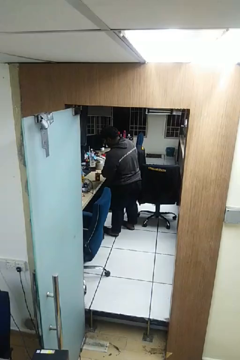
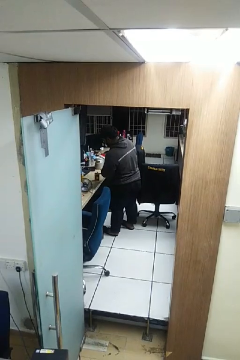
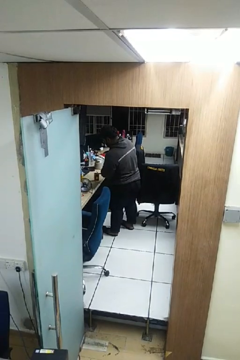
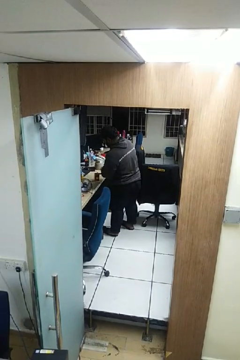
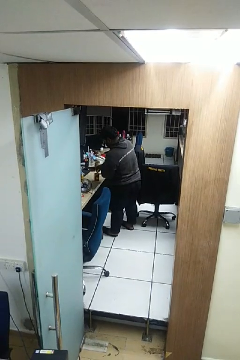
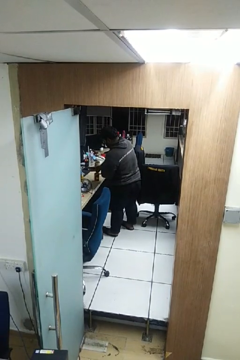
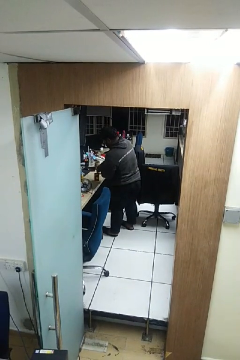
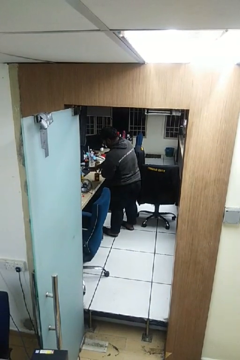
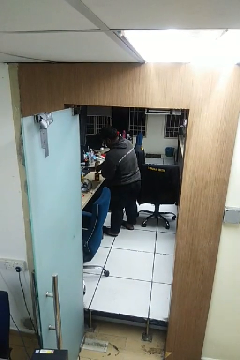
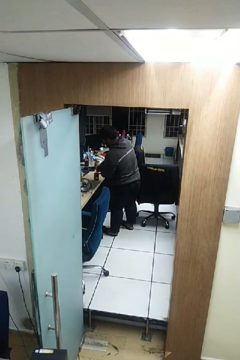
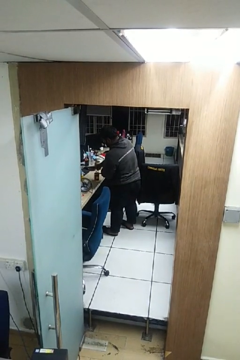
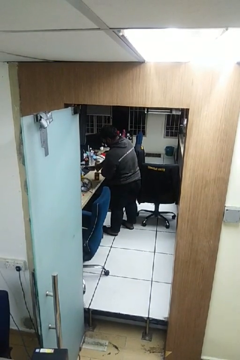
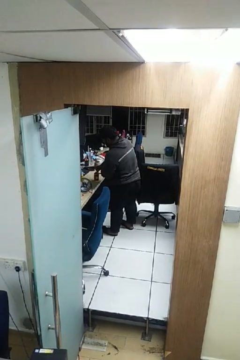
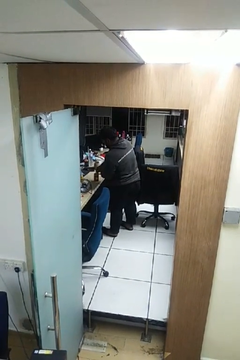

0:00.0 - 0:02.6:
person opens can with can opener

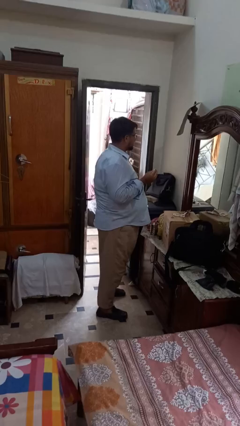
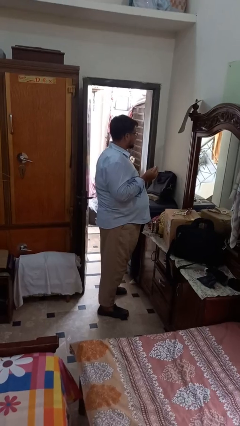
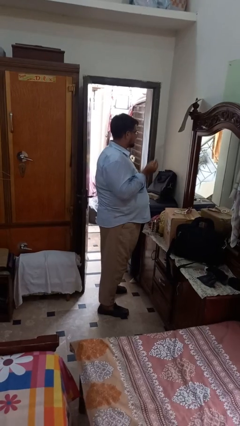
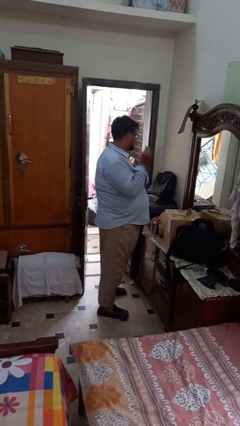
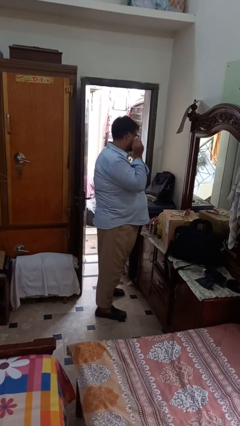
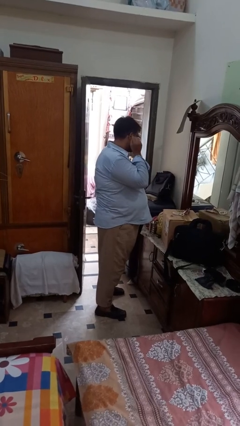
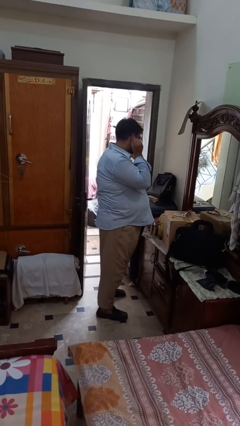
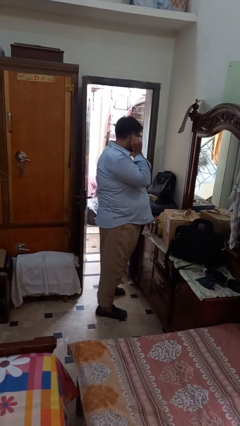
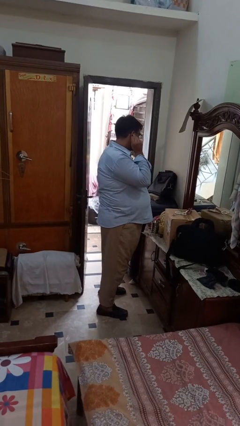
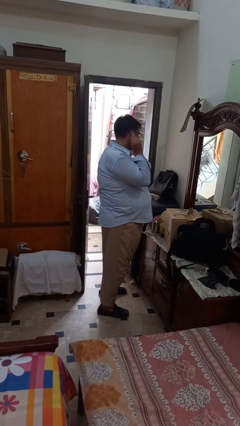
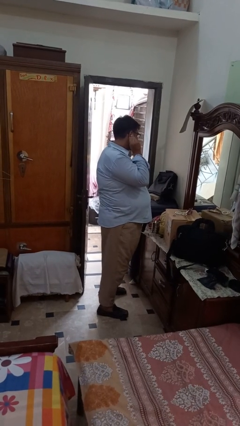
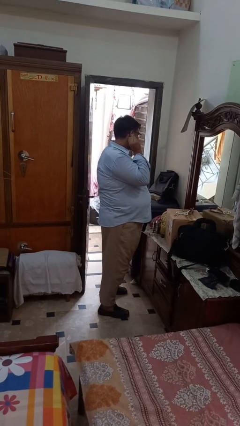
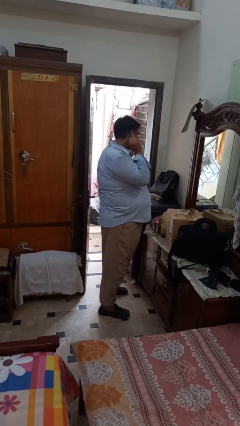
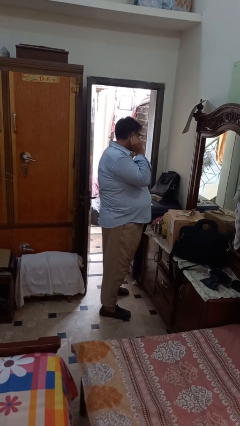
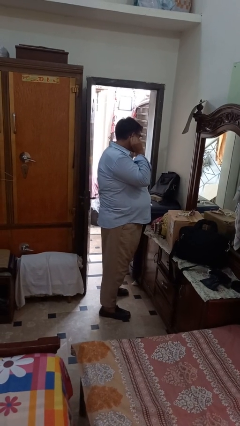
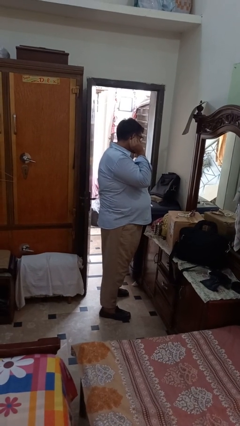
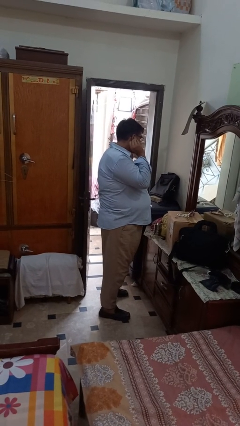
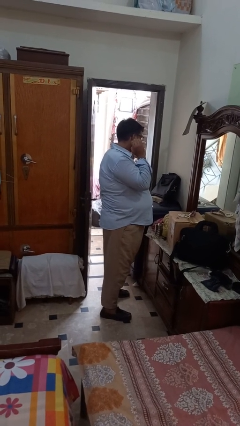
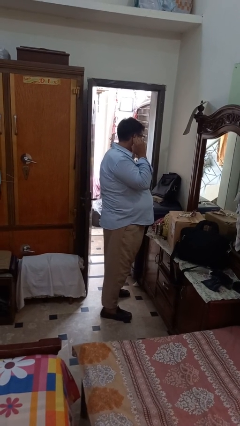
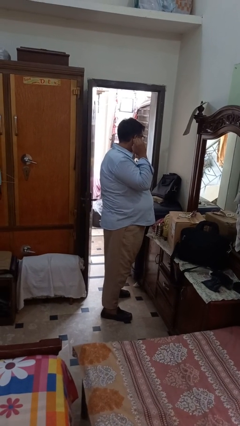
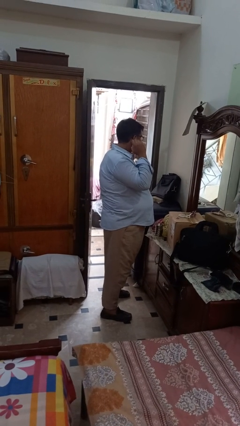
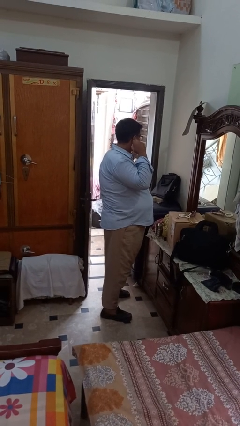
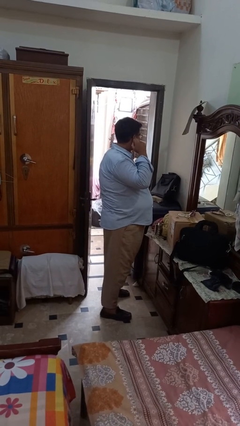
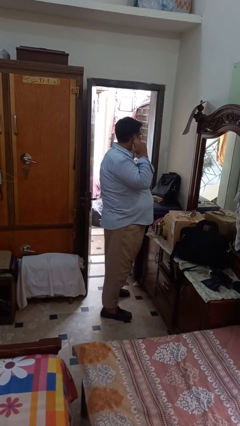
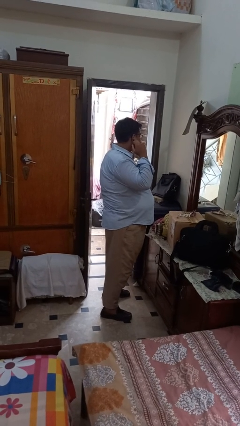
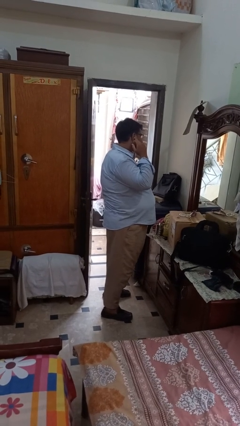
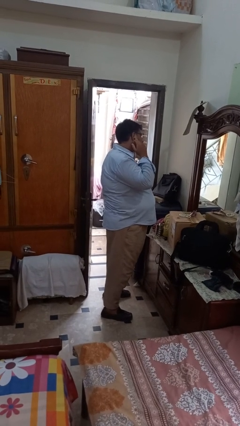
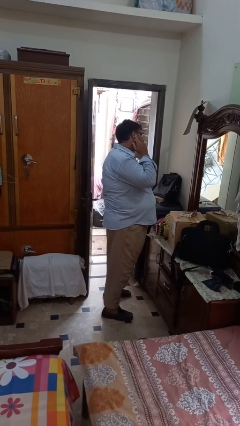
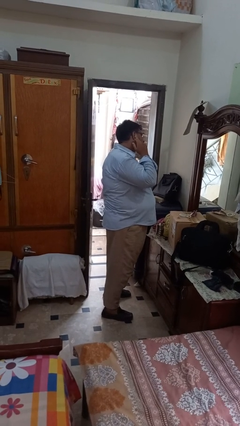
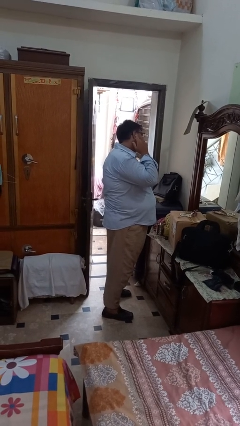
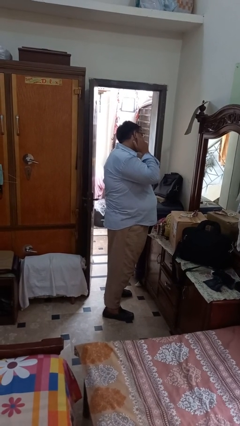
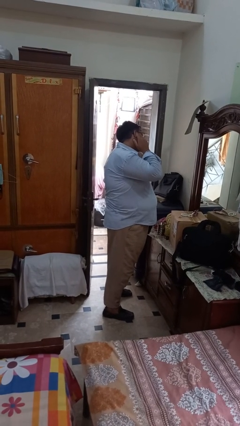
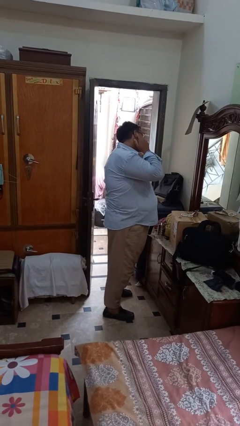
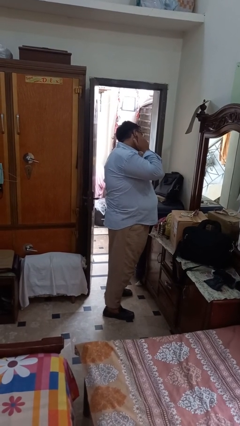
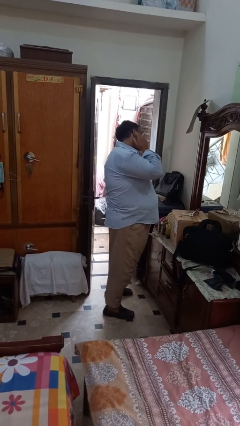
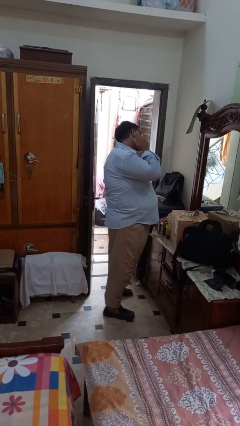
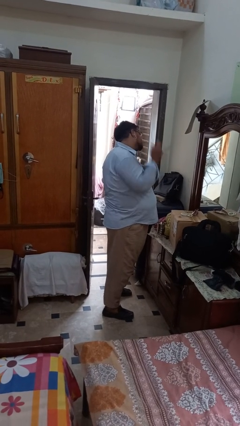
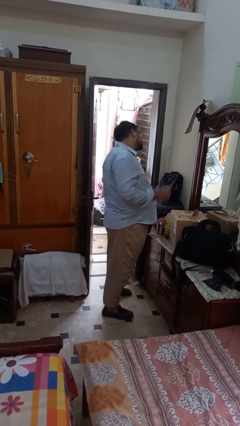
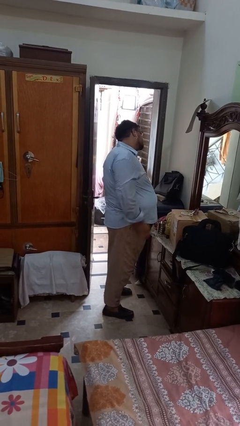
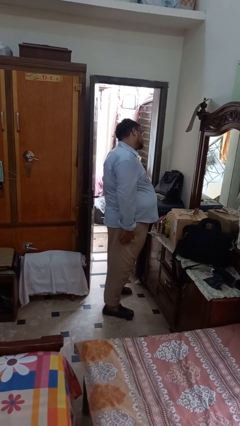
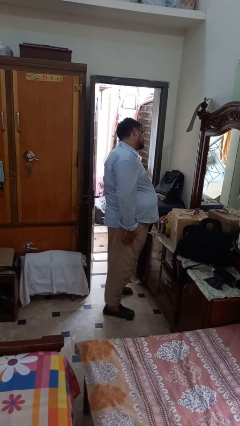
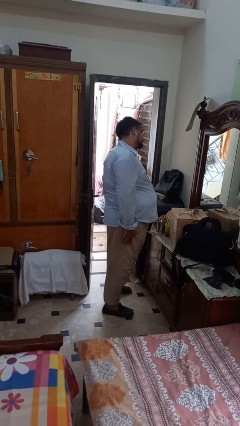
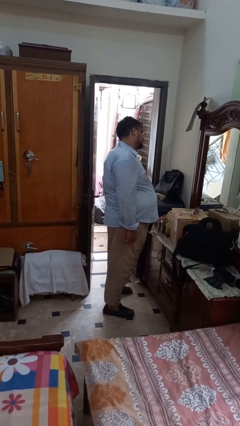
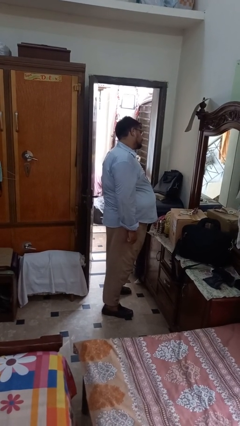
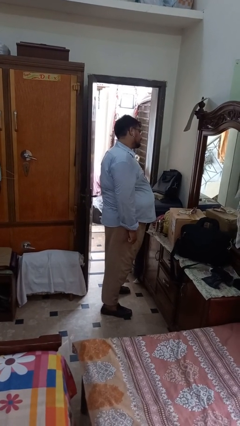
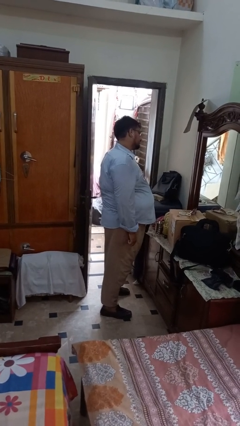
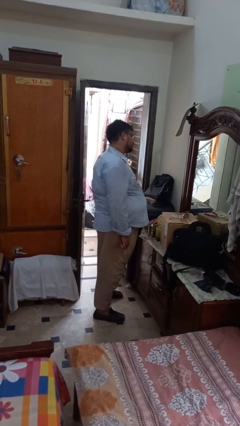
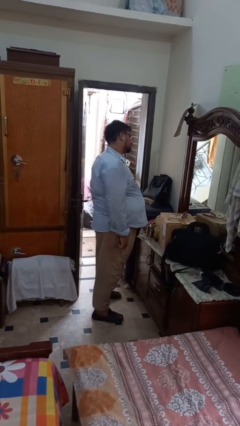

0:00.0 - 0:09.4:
person puts on earrings

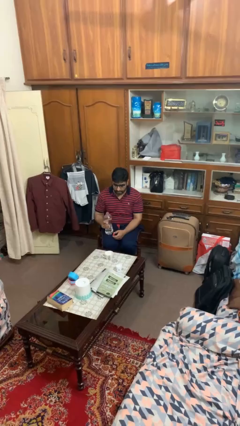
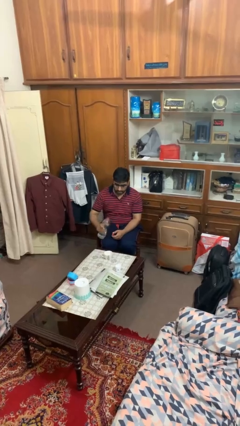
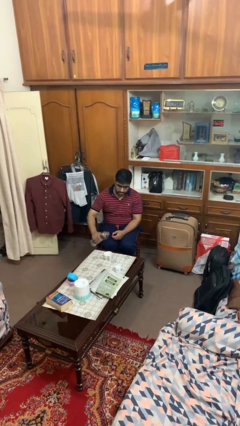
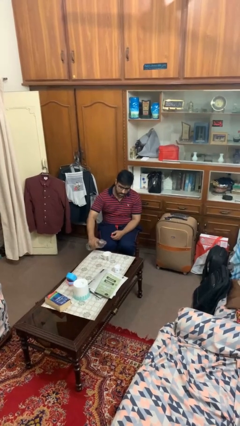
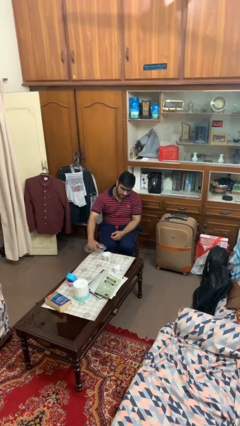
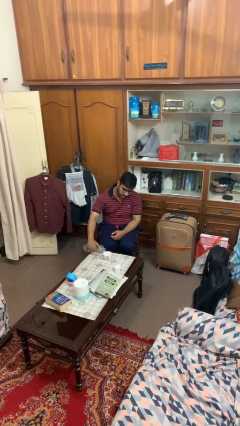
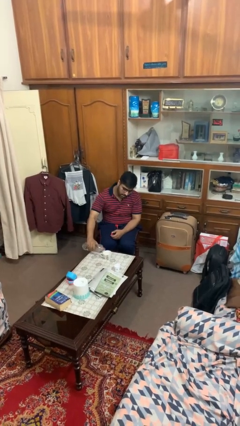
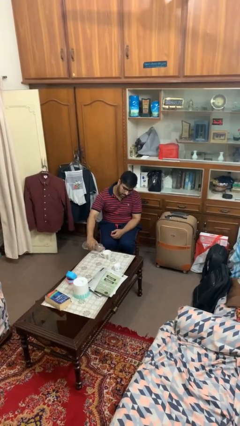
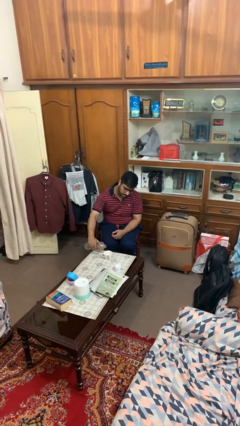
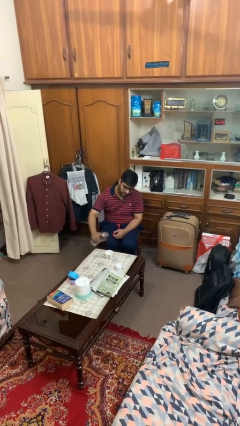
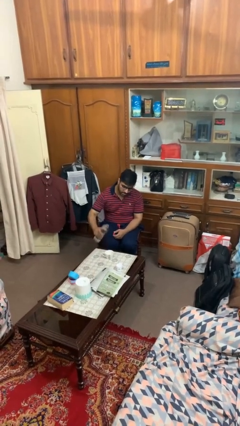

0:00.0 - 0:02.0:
person pours liquid into cup

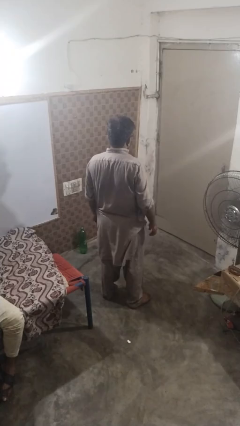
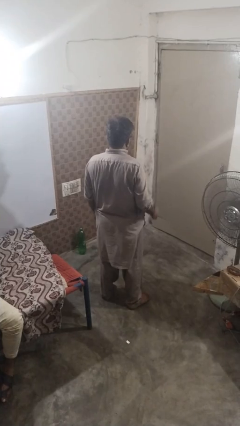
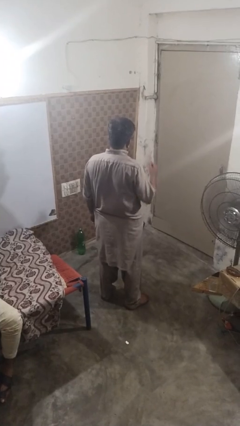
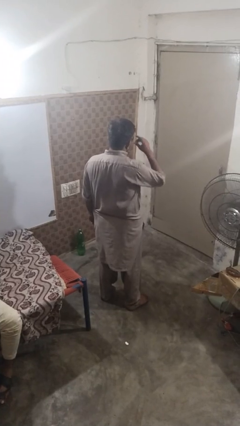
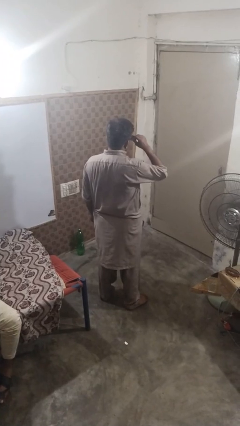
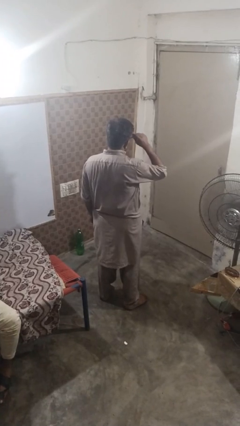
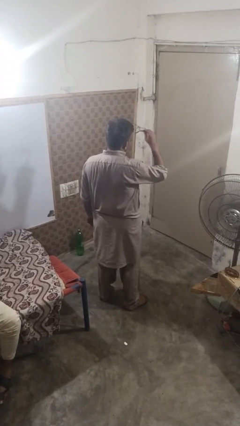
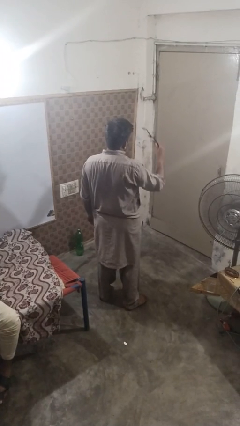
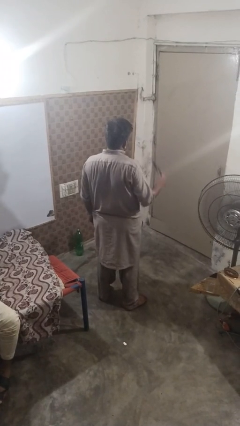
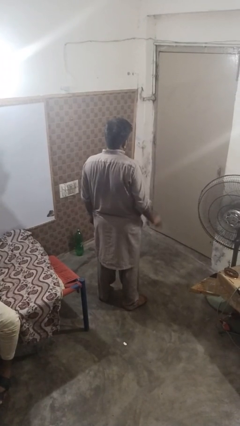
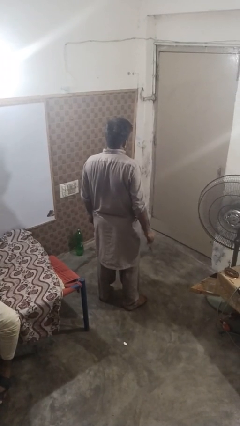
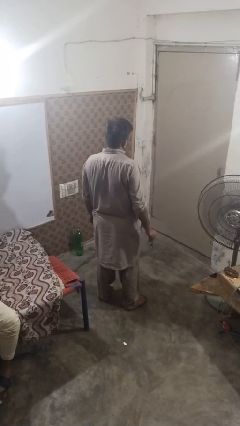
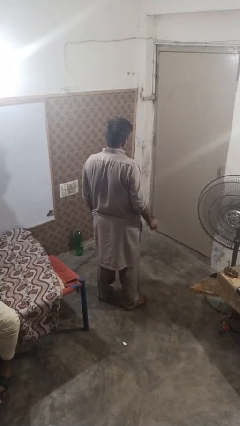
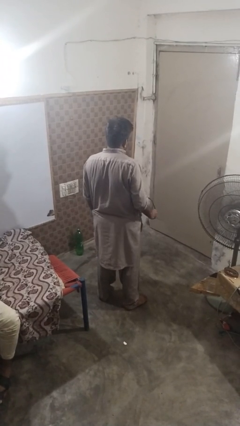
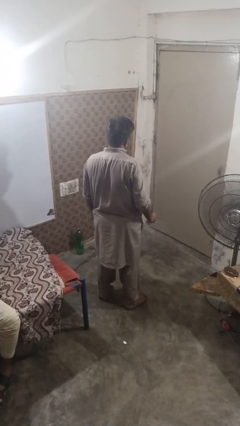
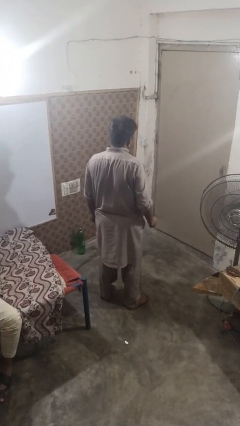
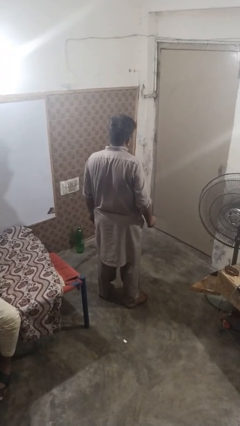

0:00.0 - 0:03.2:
person takes off glasses

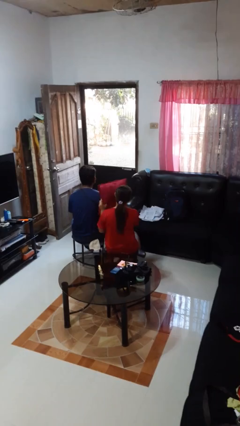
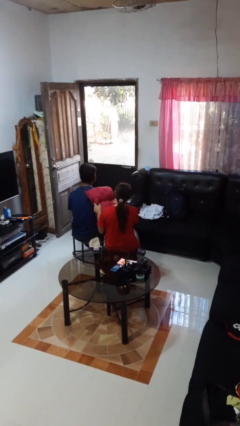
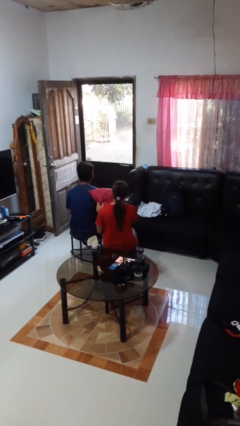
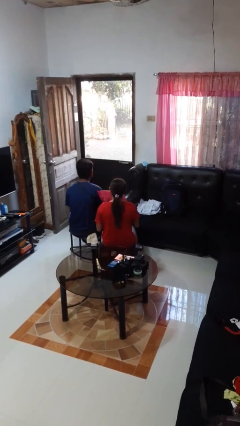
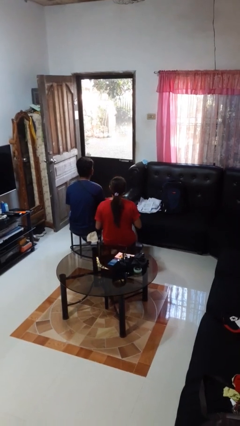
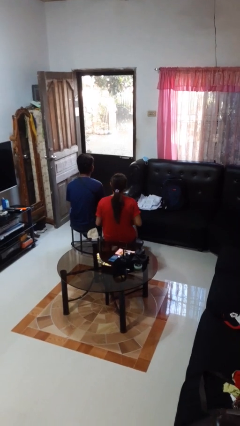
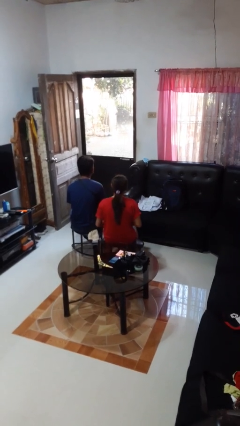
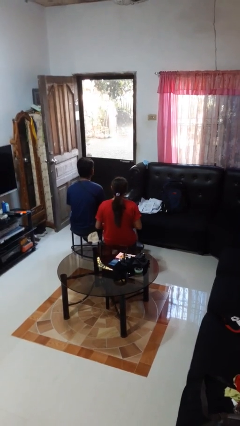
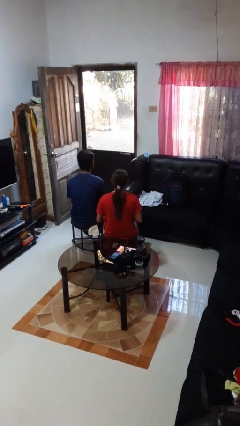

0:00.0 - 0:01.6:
person hits person with pillow
